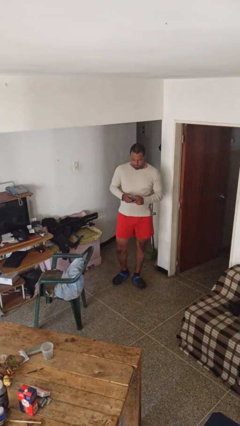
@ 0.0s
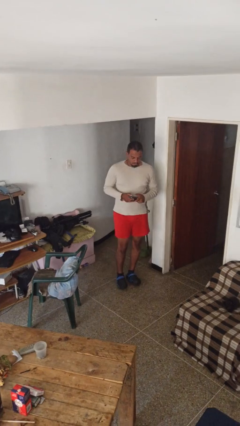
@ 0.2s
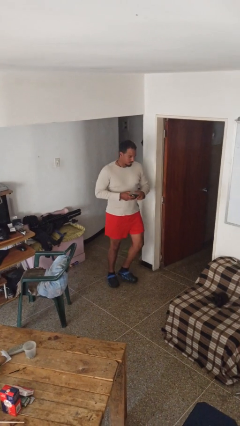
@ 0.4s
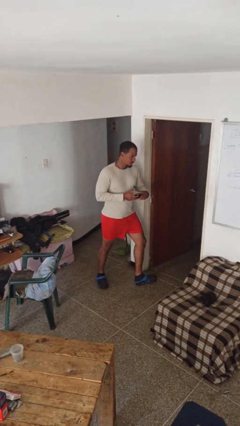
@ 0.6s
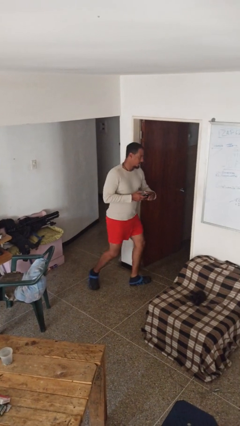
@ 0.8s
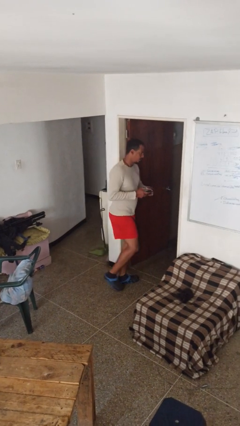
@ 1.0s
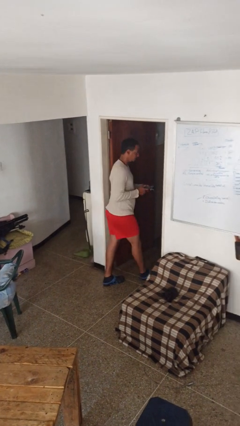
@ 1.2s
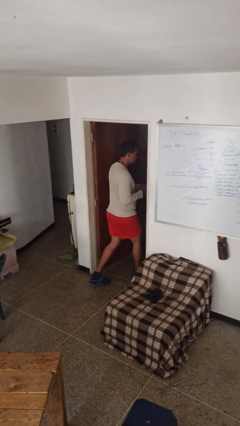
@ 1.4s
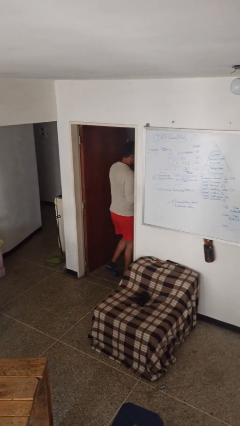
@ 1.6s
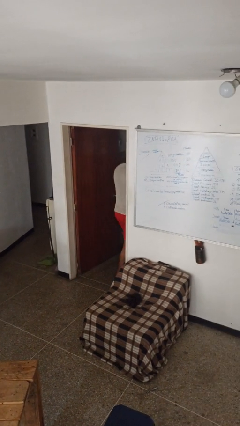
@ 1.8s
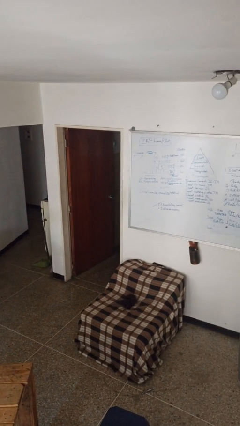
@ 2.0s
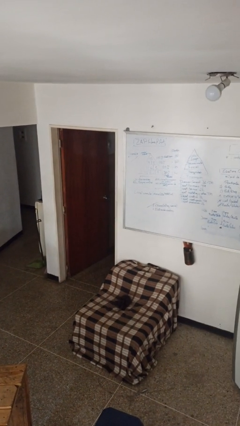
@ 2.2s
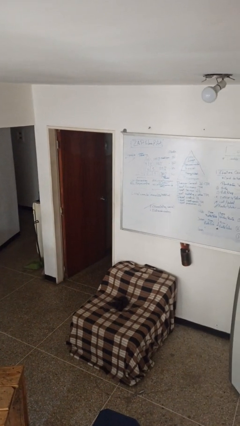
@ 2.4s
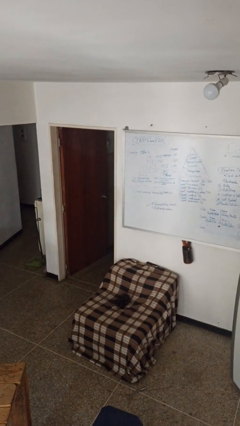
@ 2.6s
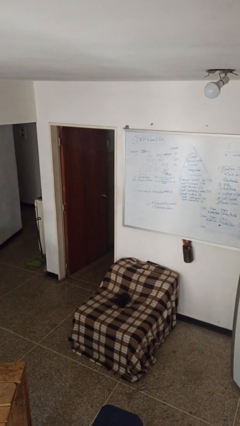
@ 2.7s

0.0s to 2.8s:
person exits scene through structure

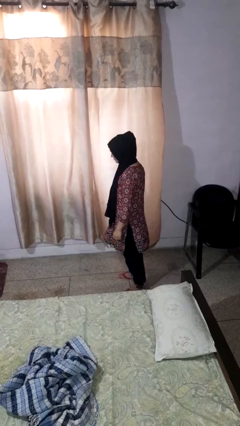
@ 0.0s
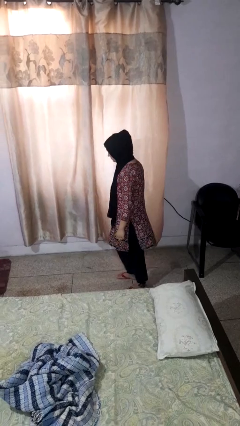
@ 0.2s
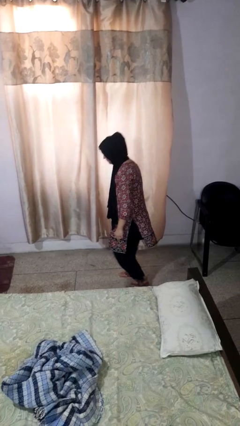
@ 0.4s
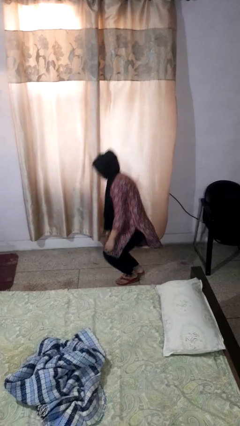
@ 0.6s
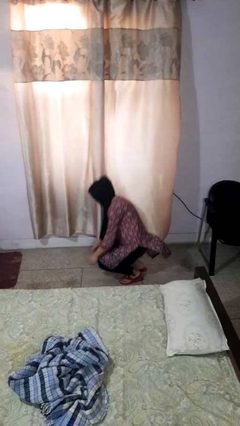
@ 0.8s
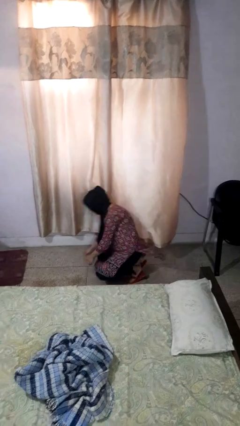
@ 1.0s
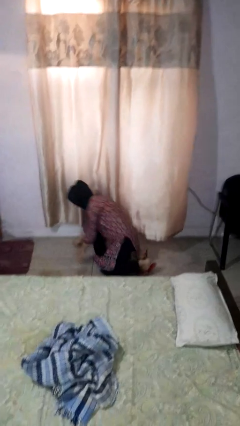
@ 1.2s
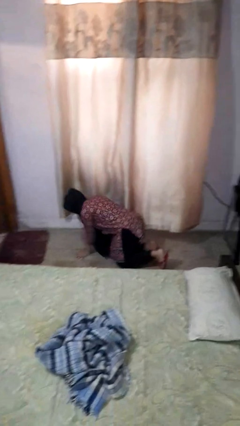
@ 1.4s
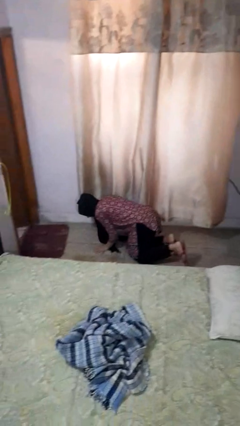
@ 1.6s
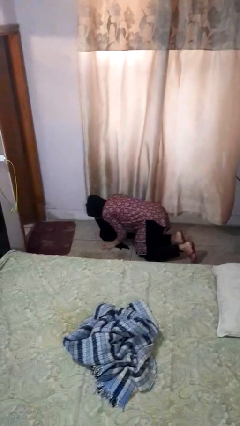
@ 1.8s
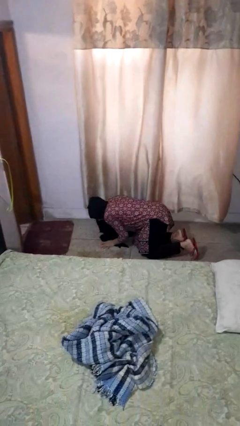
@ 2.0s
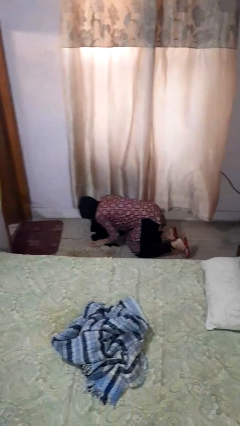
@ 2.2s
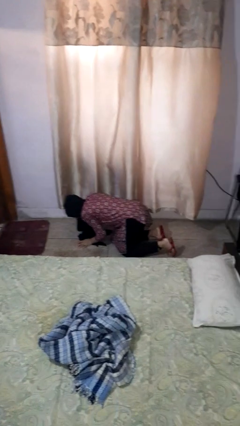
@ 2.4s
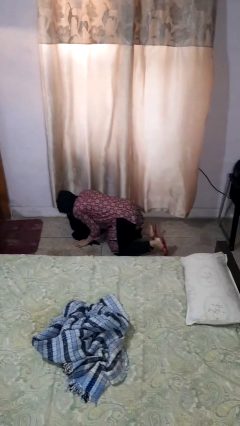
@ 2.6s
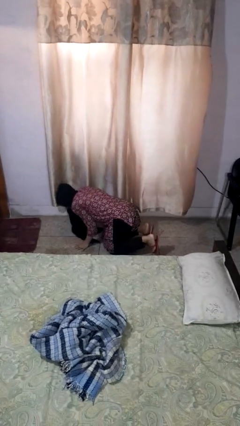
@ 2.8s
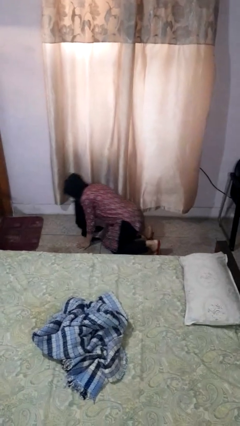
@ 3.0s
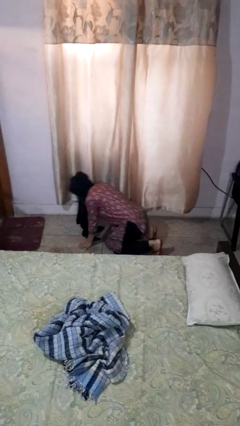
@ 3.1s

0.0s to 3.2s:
person falls while standing

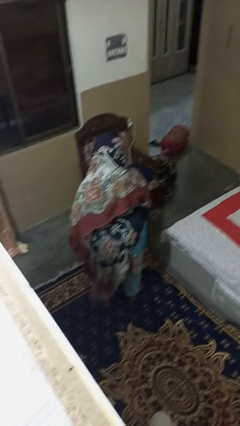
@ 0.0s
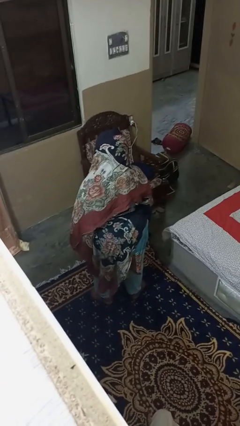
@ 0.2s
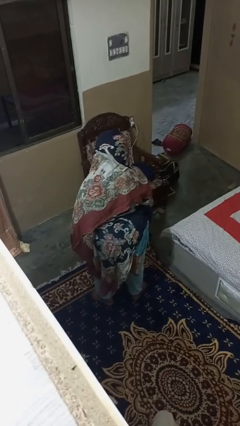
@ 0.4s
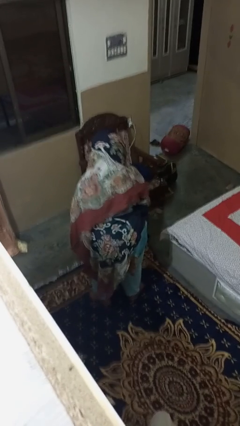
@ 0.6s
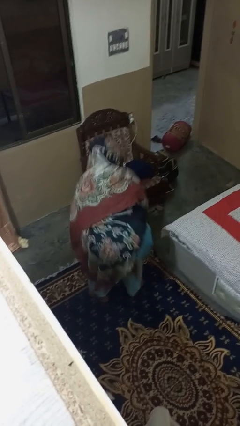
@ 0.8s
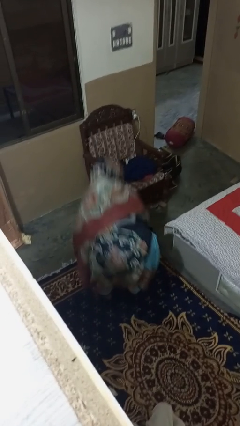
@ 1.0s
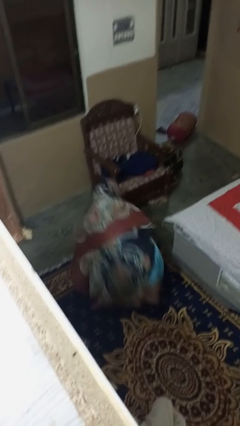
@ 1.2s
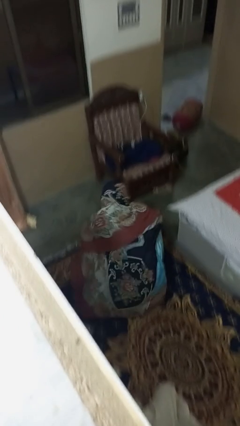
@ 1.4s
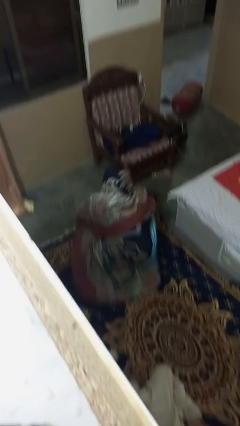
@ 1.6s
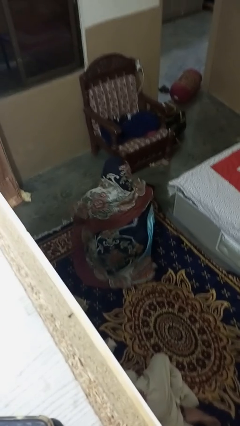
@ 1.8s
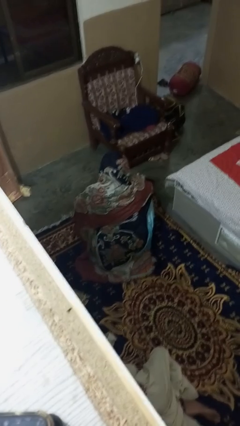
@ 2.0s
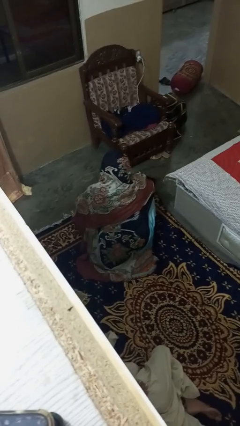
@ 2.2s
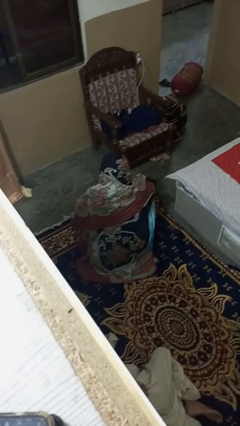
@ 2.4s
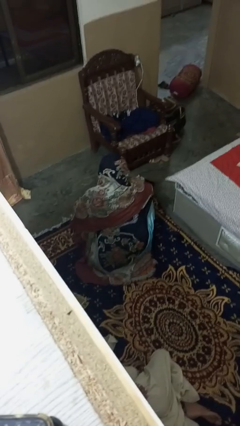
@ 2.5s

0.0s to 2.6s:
person squats

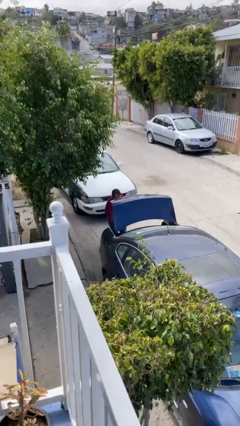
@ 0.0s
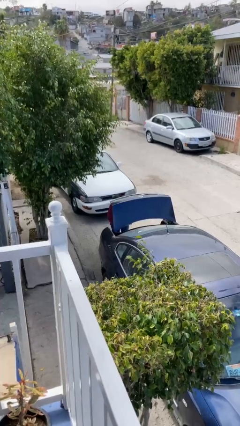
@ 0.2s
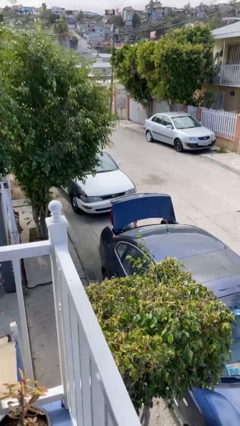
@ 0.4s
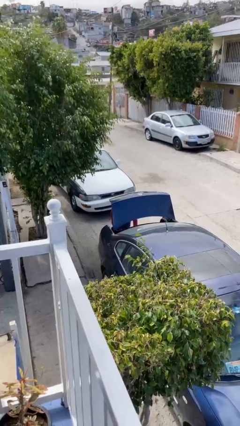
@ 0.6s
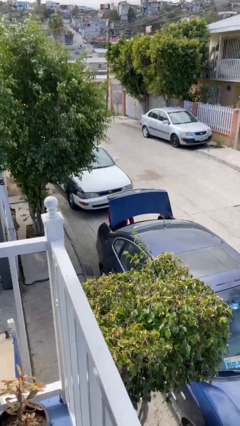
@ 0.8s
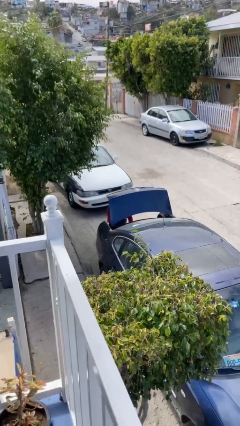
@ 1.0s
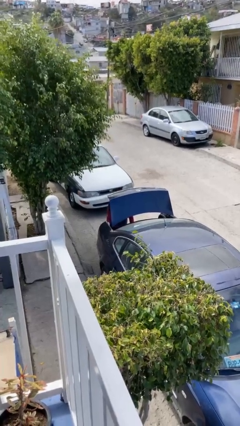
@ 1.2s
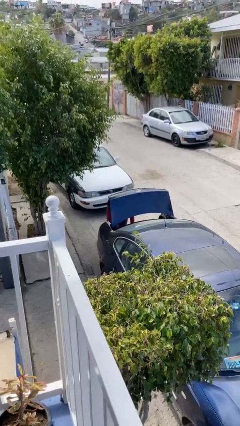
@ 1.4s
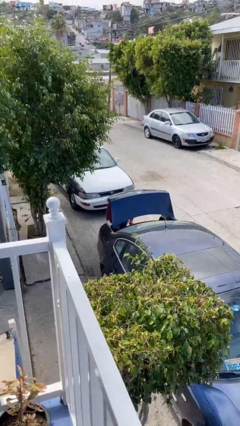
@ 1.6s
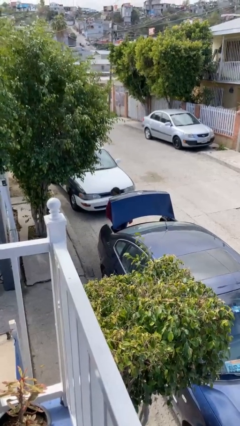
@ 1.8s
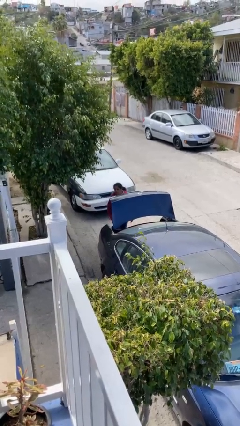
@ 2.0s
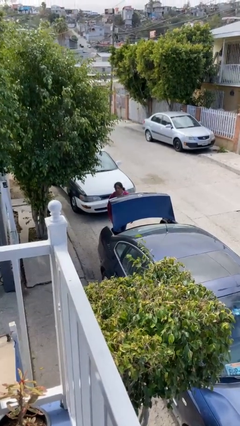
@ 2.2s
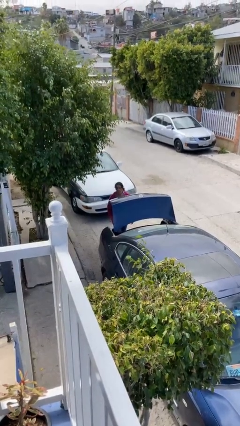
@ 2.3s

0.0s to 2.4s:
person loads car

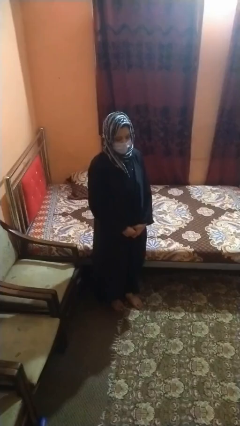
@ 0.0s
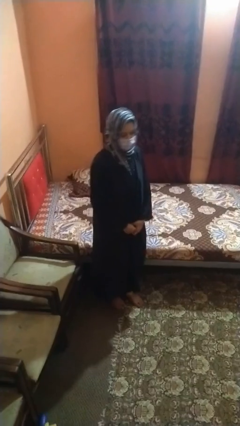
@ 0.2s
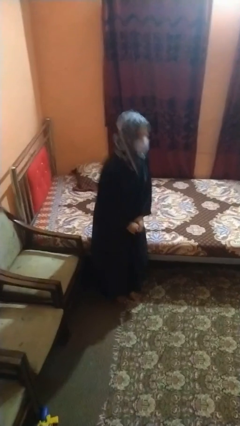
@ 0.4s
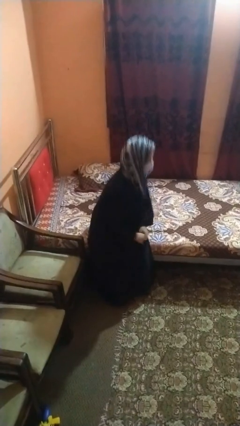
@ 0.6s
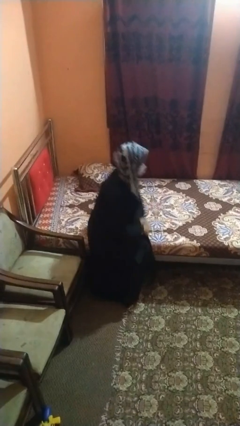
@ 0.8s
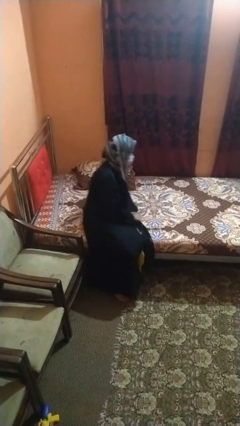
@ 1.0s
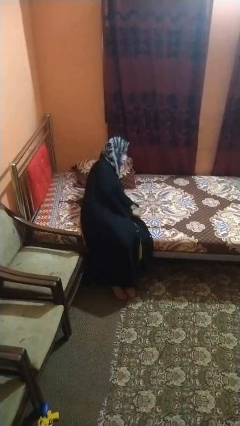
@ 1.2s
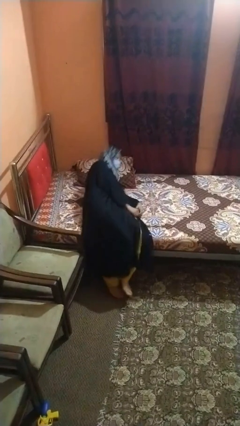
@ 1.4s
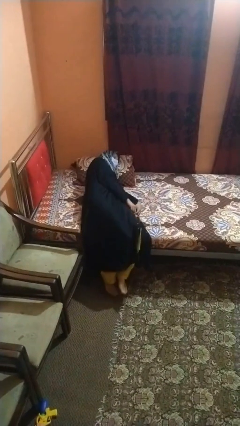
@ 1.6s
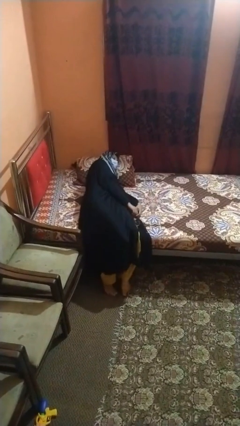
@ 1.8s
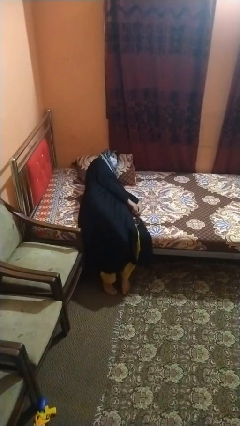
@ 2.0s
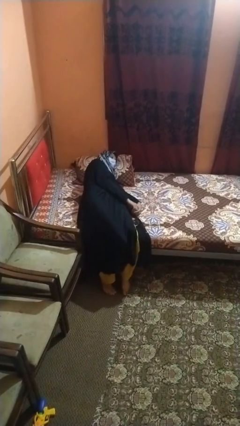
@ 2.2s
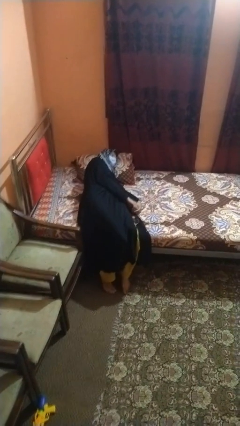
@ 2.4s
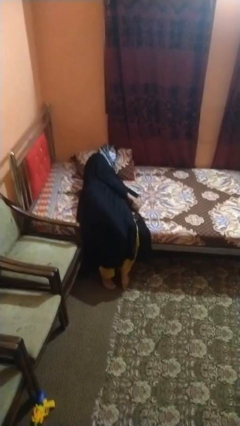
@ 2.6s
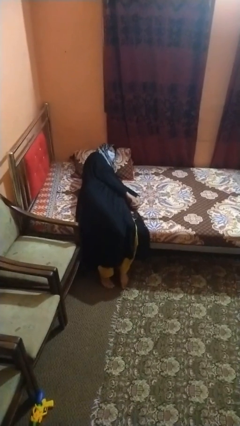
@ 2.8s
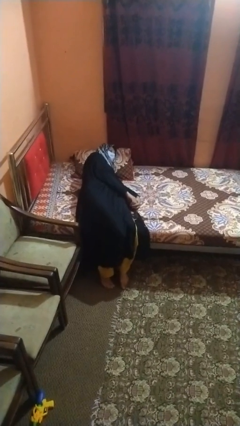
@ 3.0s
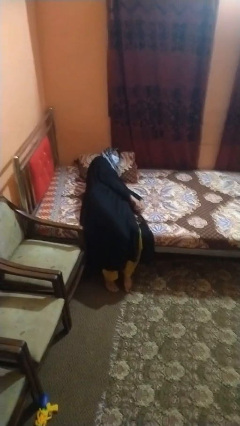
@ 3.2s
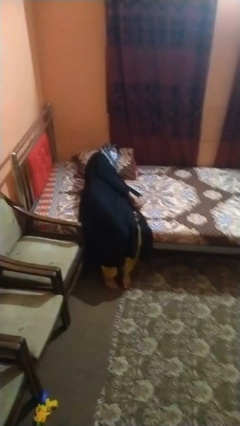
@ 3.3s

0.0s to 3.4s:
person lies down on bed

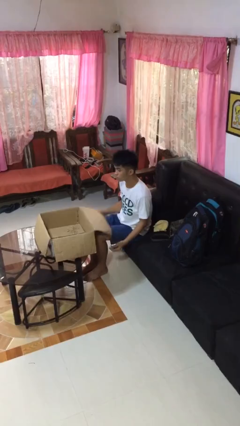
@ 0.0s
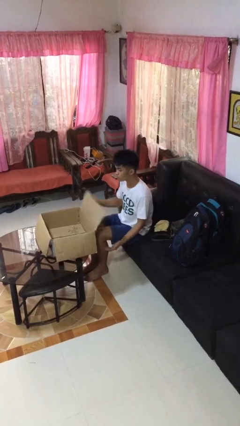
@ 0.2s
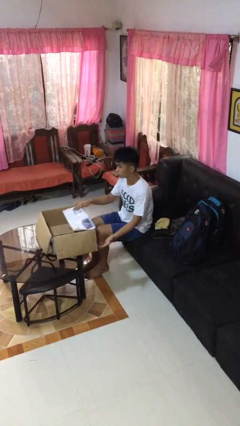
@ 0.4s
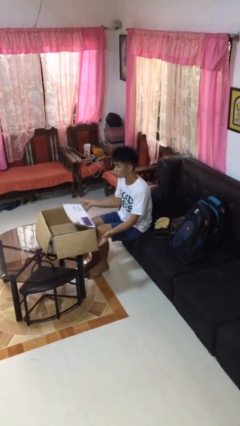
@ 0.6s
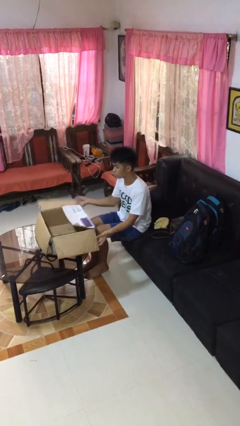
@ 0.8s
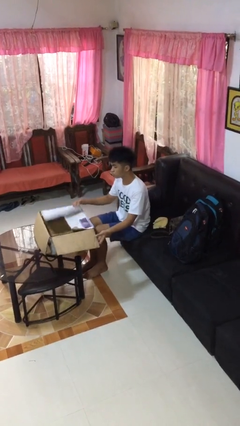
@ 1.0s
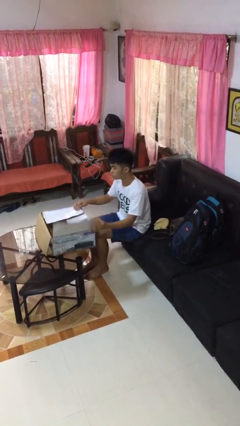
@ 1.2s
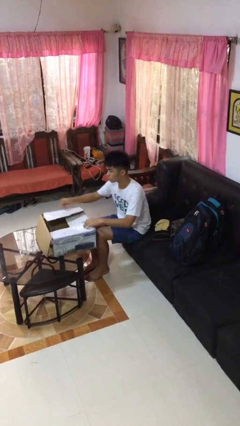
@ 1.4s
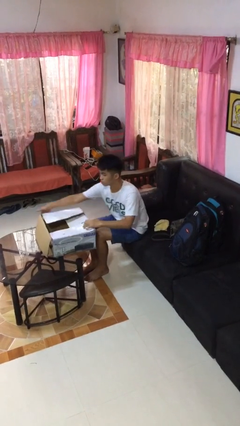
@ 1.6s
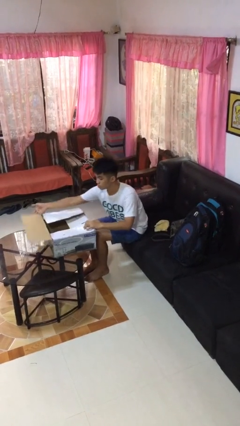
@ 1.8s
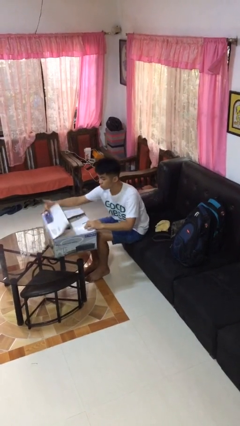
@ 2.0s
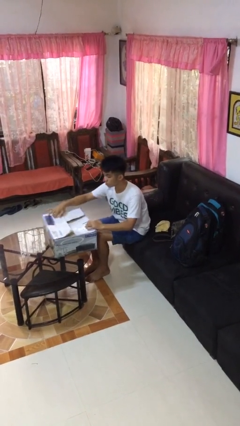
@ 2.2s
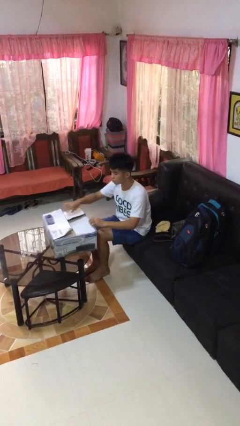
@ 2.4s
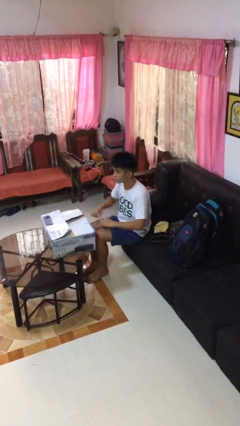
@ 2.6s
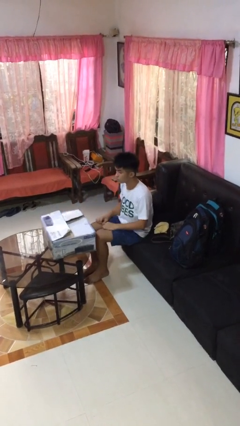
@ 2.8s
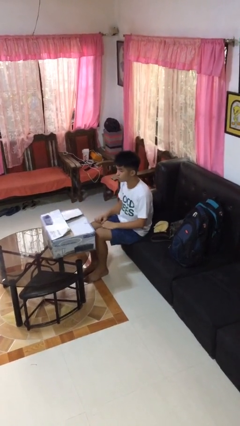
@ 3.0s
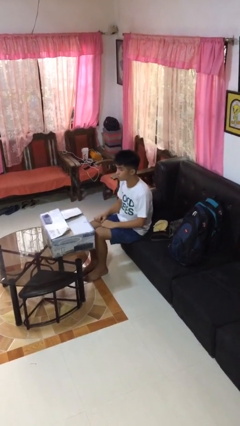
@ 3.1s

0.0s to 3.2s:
person closes box
